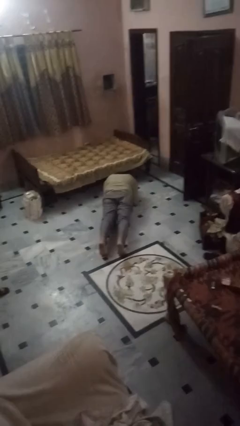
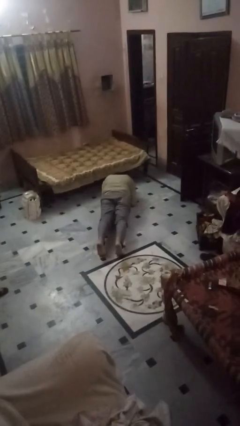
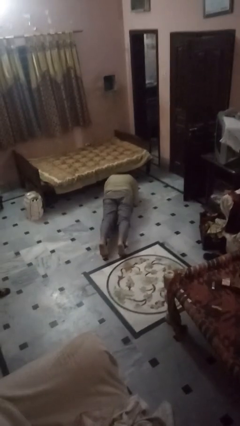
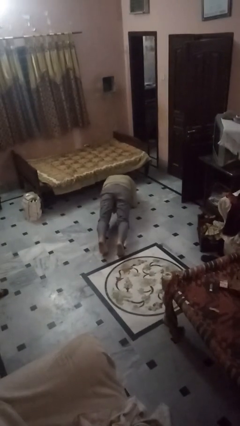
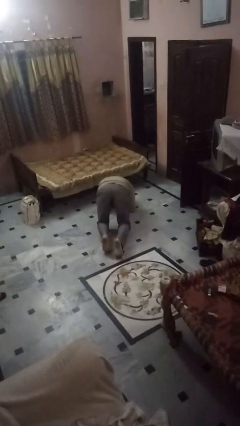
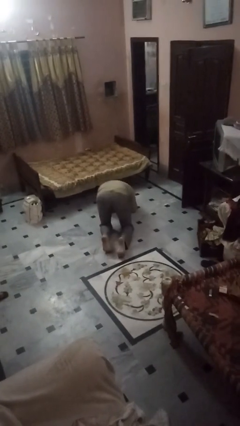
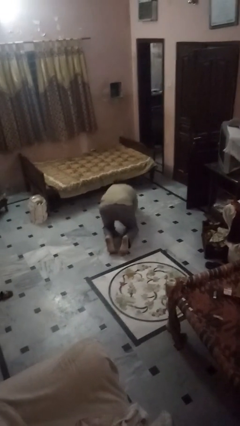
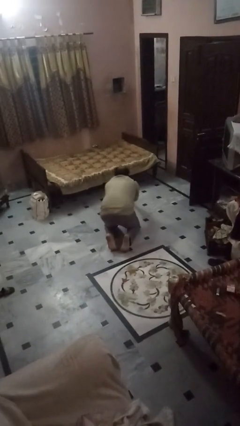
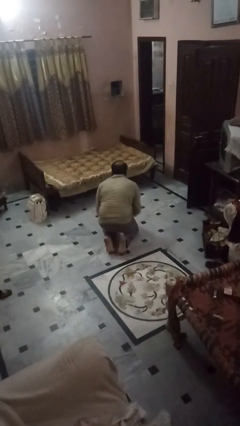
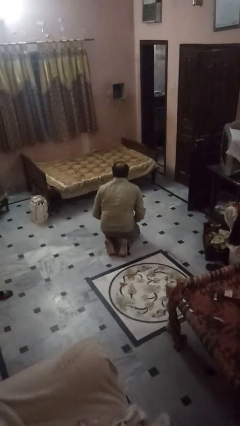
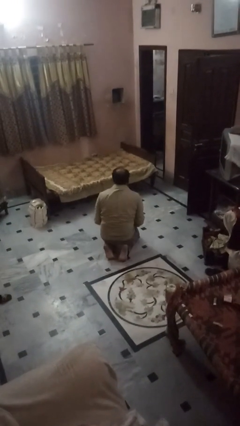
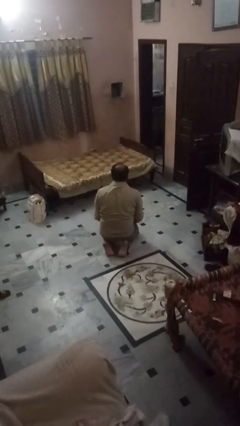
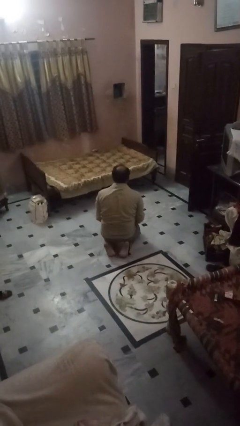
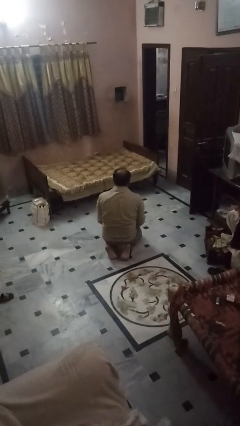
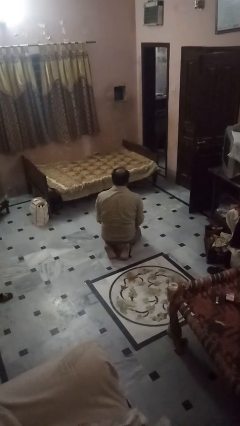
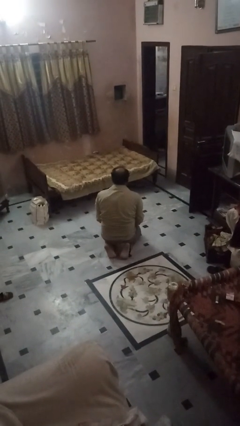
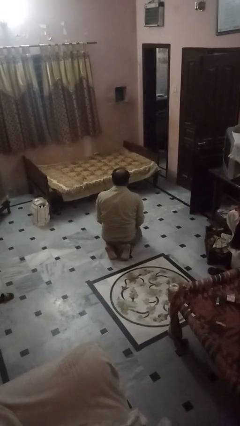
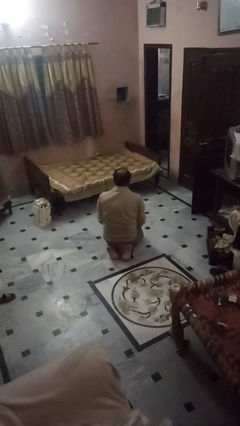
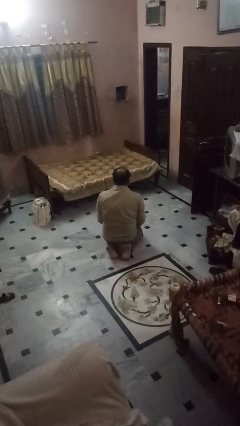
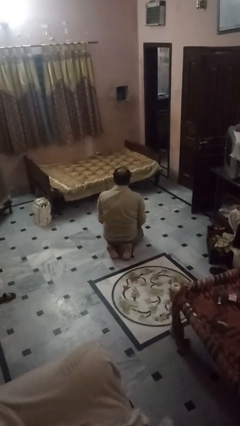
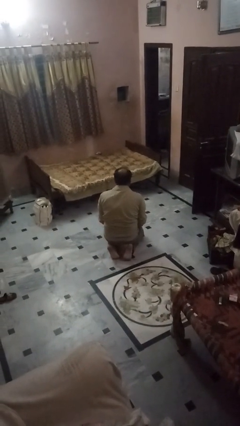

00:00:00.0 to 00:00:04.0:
person stands up from floor

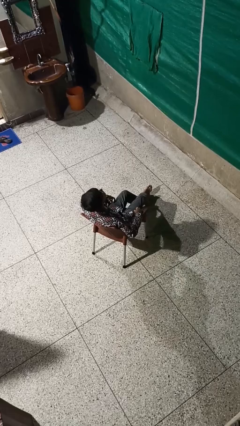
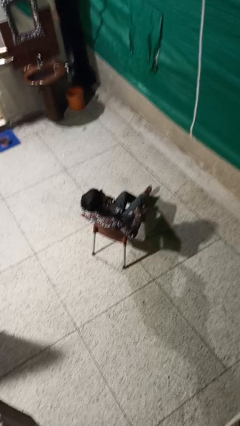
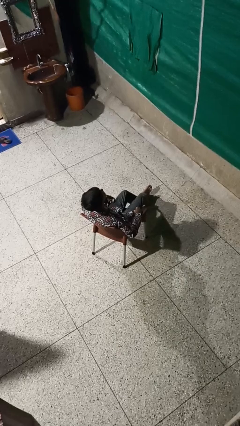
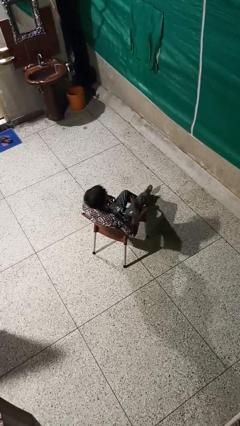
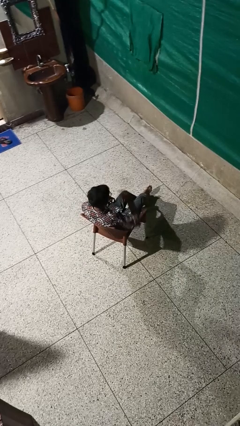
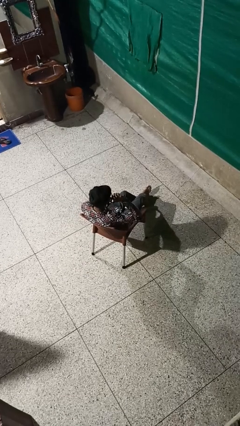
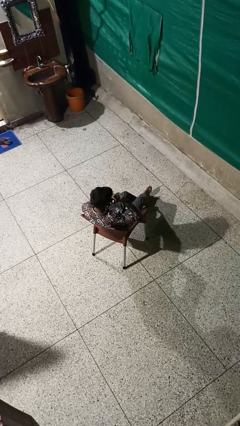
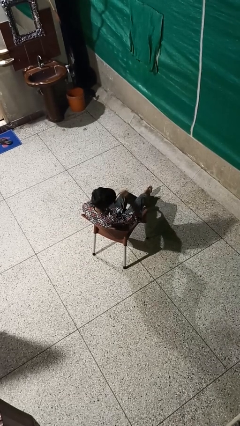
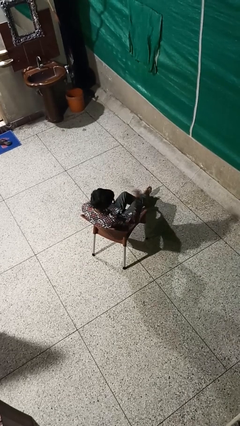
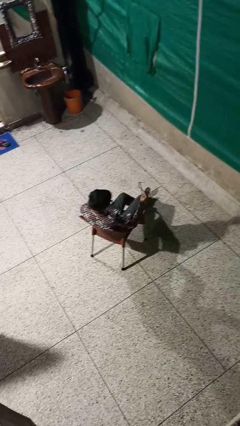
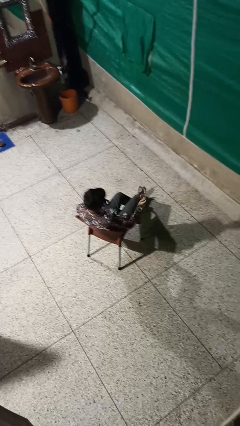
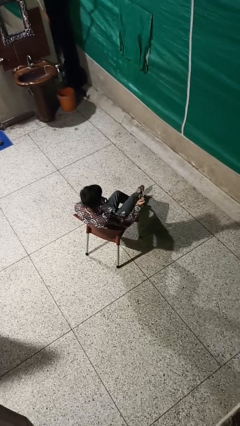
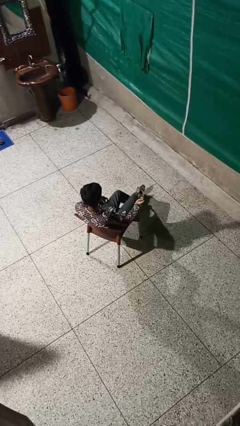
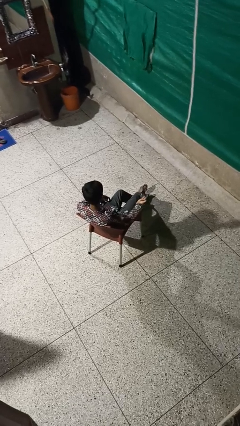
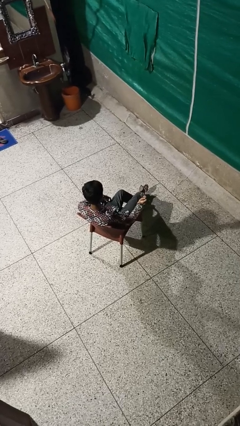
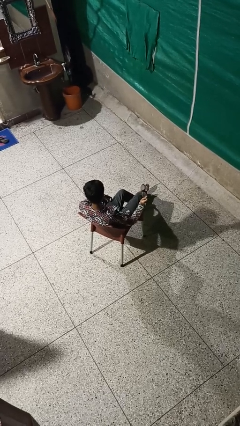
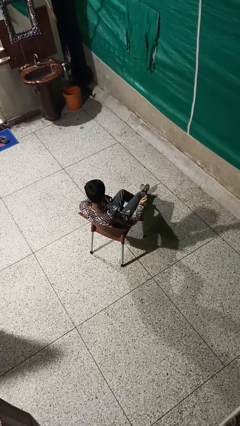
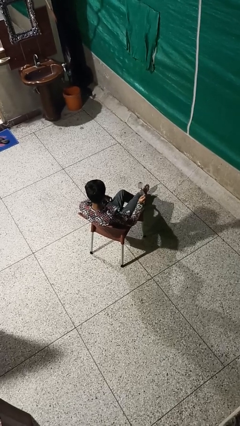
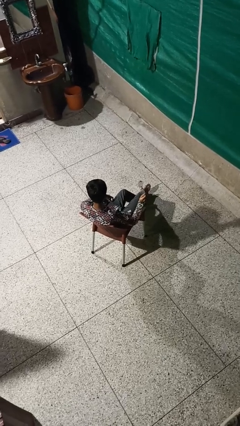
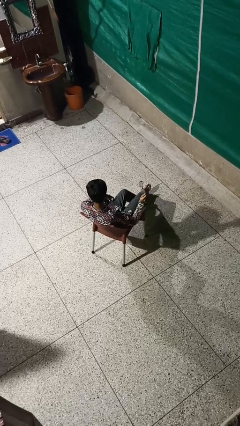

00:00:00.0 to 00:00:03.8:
person takes off glasses

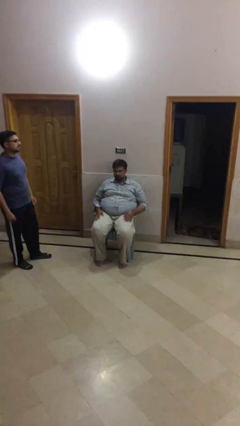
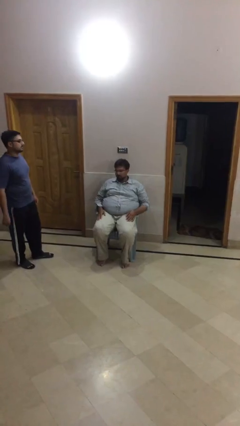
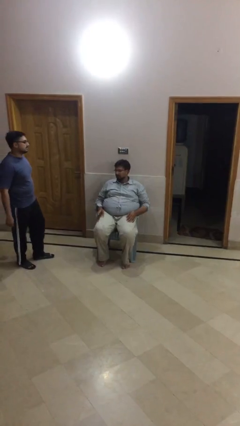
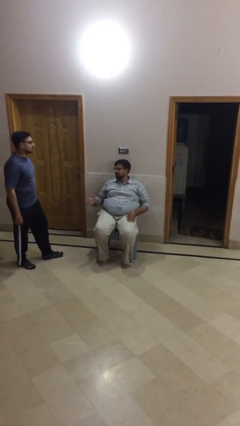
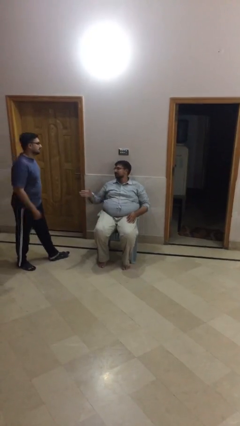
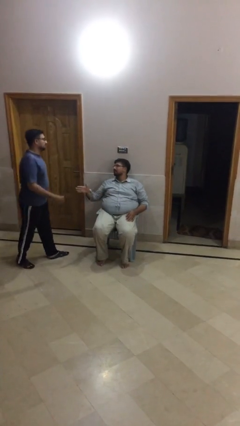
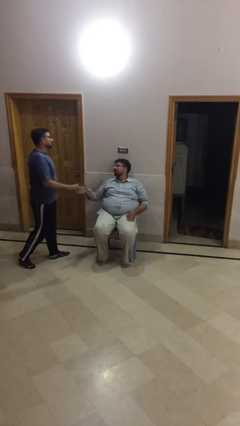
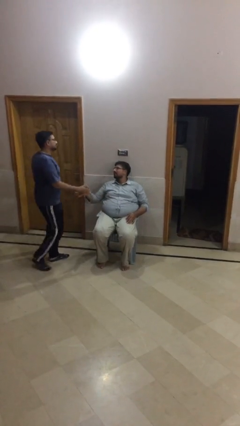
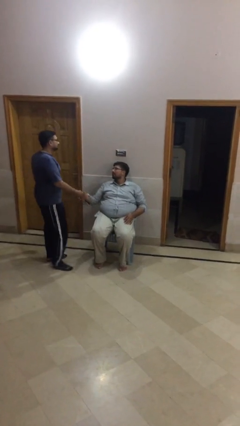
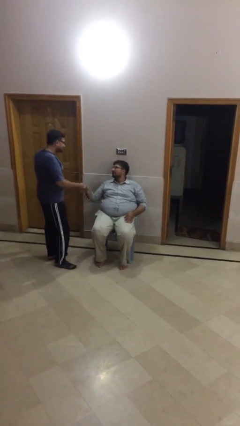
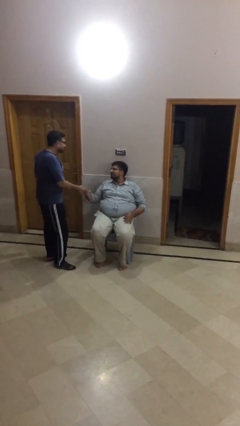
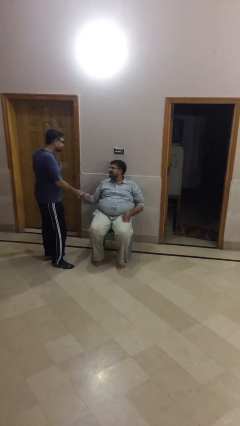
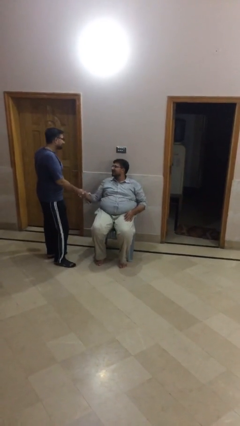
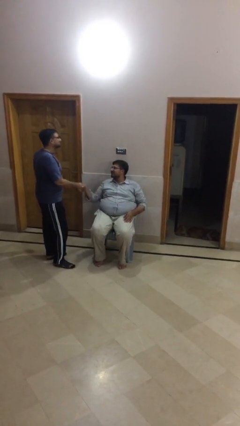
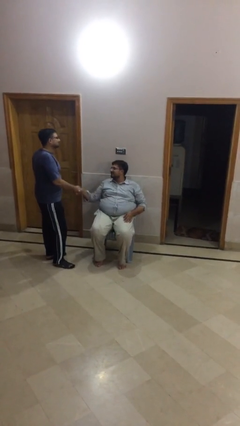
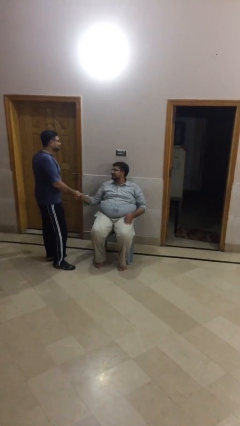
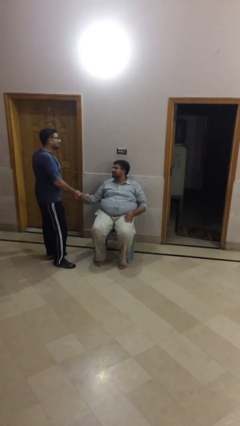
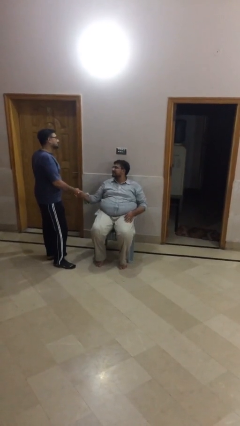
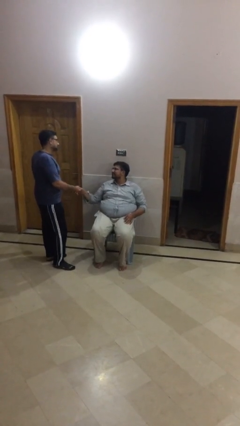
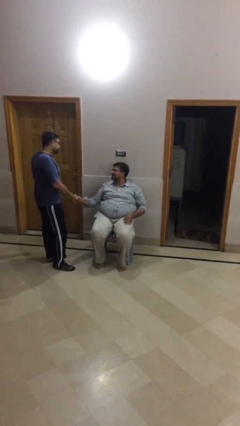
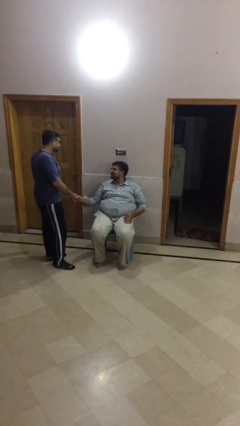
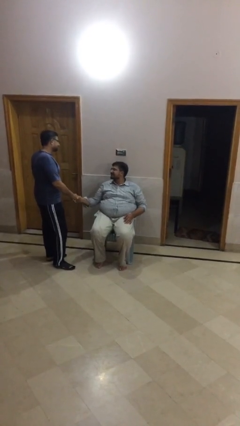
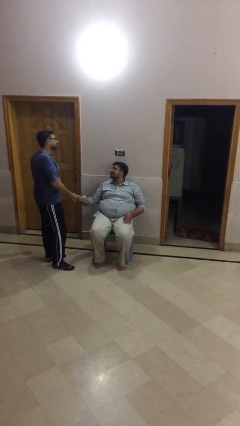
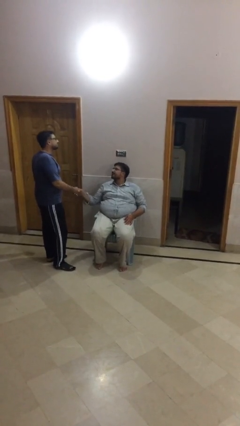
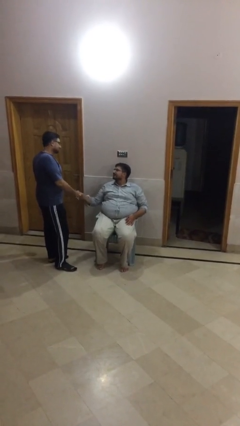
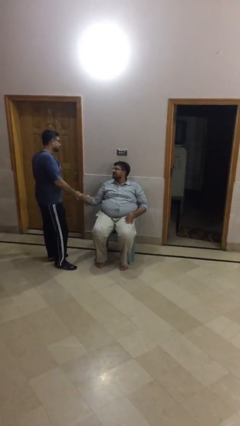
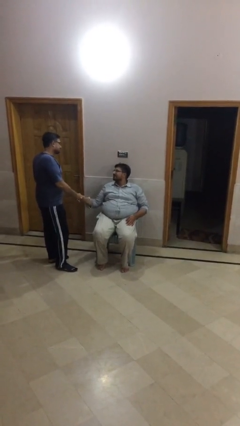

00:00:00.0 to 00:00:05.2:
person shakes hand

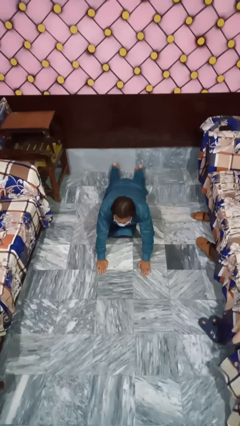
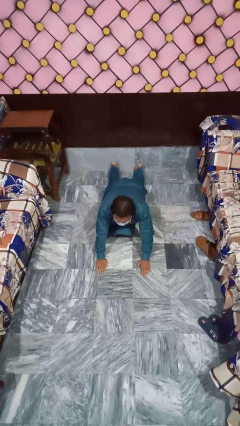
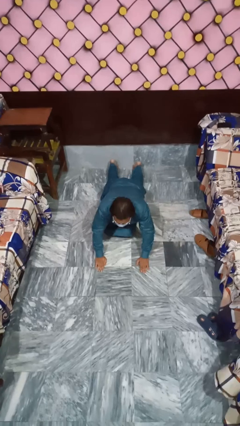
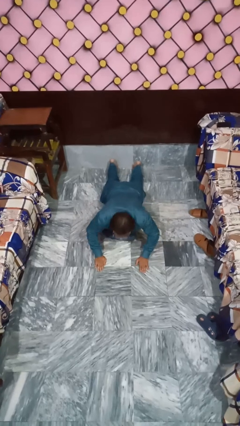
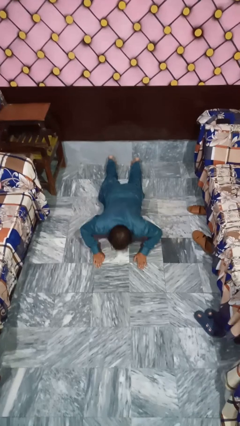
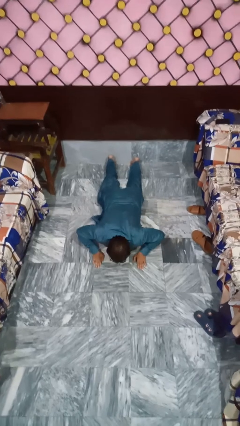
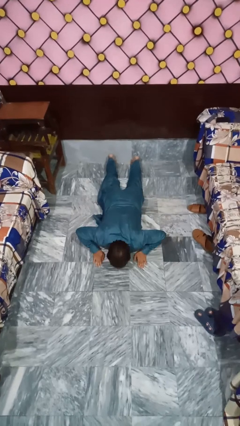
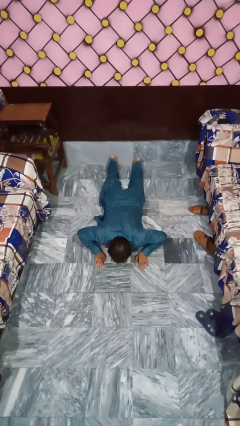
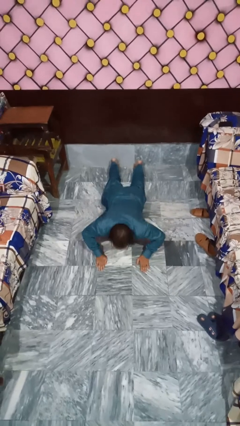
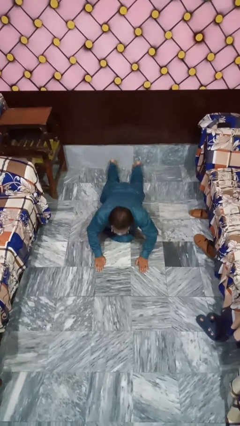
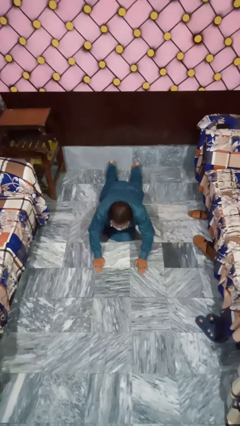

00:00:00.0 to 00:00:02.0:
person exercises with pushup

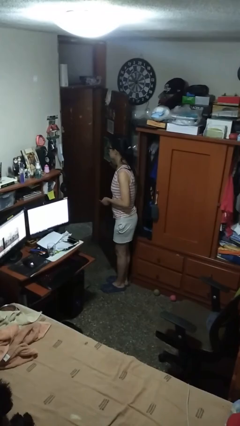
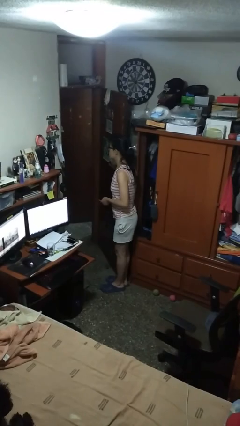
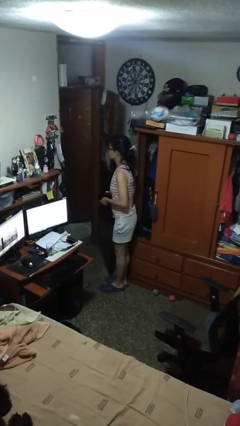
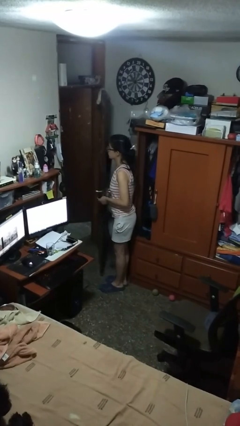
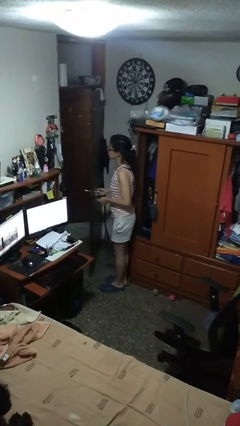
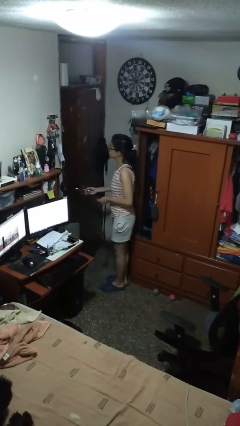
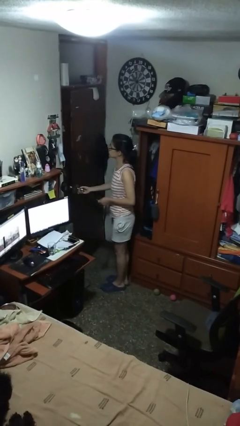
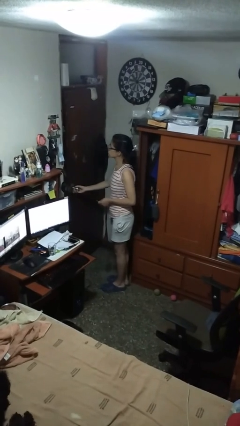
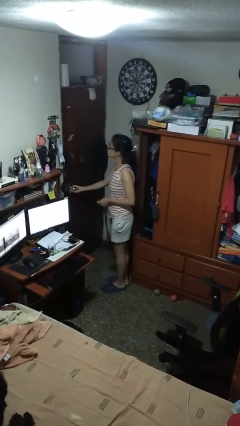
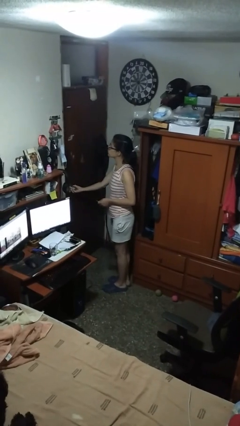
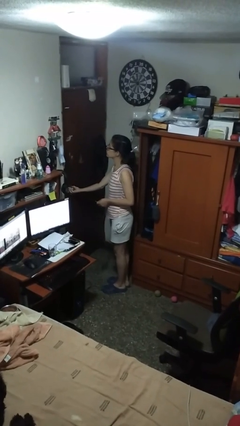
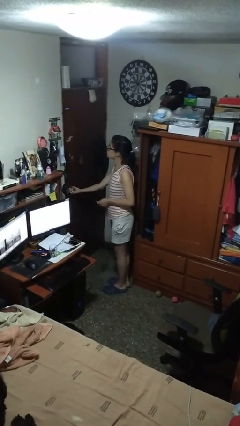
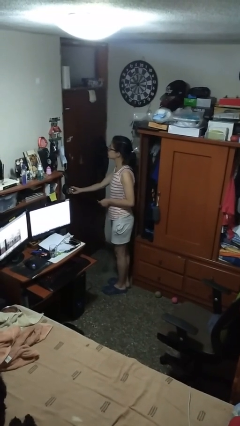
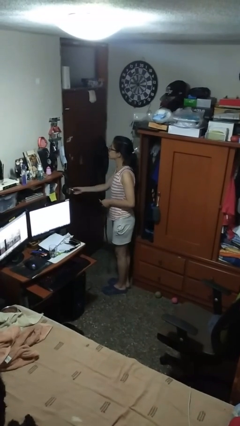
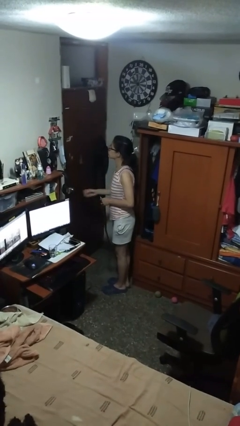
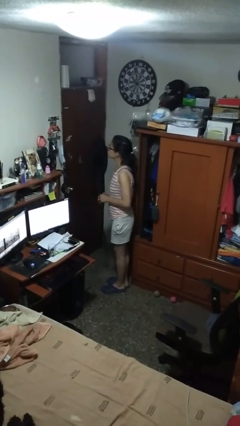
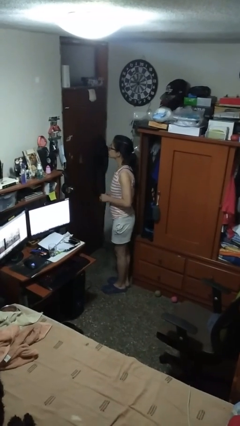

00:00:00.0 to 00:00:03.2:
person closes facility door
